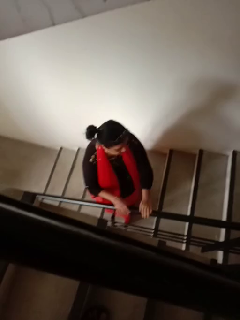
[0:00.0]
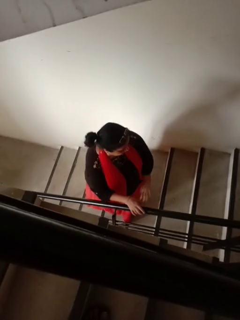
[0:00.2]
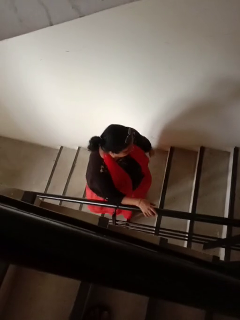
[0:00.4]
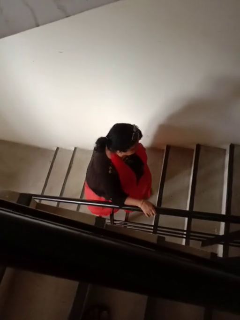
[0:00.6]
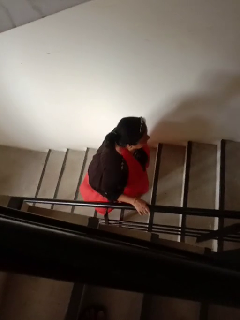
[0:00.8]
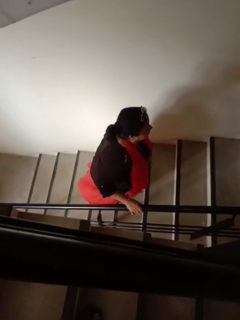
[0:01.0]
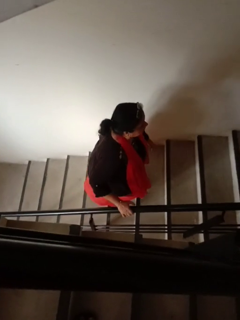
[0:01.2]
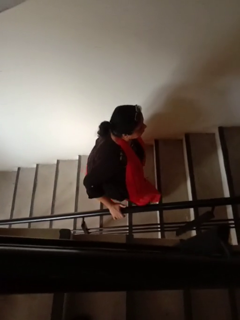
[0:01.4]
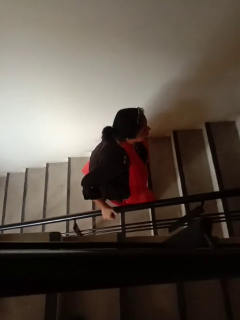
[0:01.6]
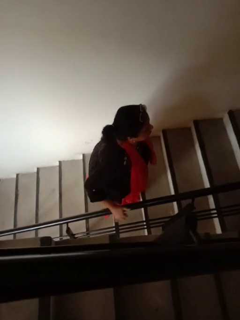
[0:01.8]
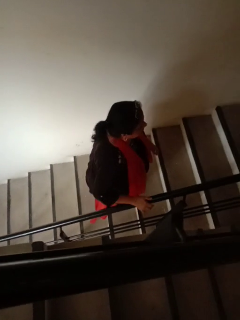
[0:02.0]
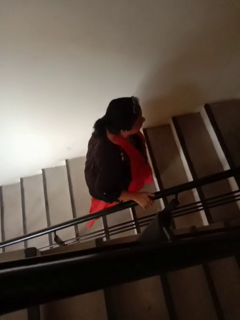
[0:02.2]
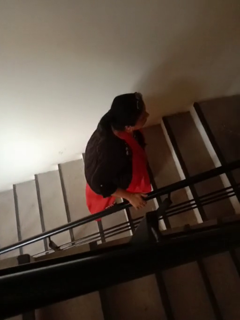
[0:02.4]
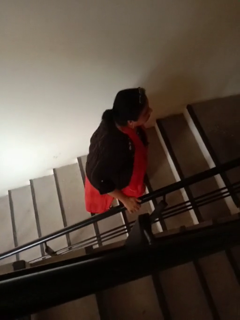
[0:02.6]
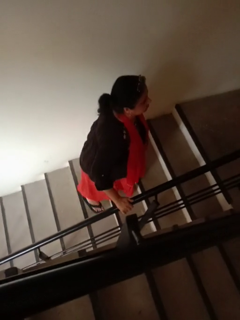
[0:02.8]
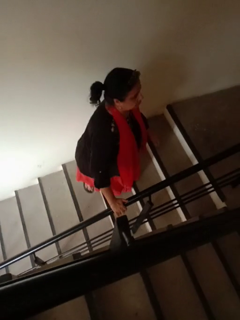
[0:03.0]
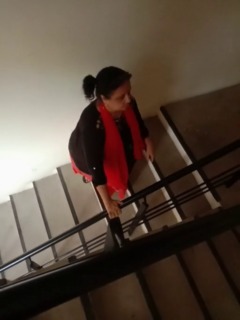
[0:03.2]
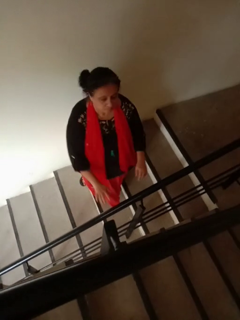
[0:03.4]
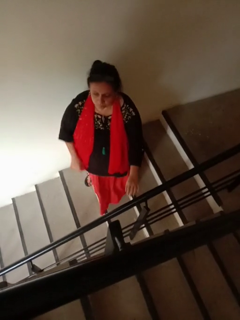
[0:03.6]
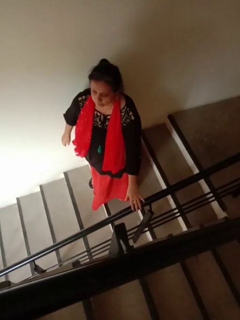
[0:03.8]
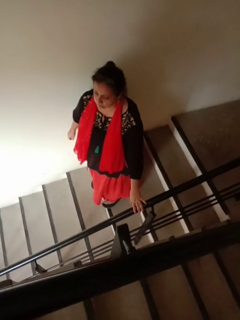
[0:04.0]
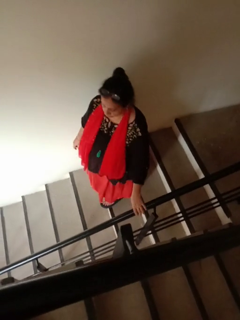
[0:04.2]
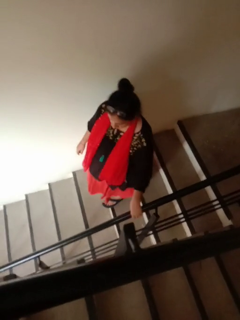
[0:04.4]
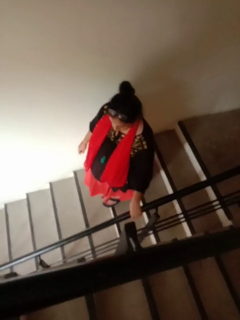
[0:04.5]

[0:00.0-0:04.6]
person climbs up stairs

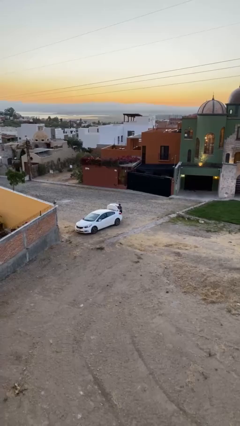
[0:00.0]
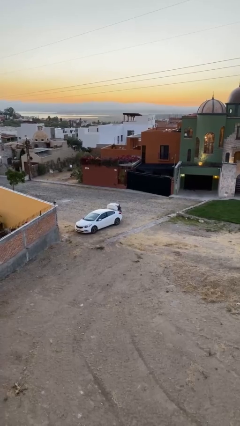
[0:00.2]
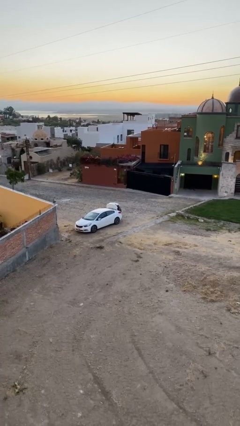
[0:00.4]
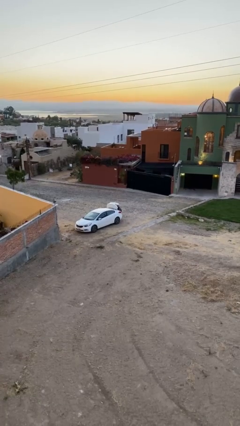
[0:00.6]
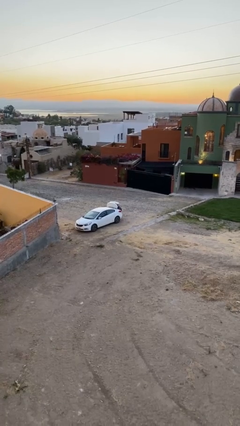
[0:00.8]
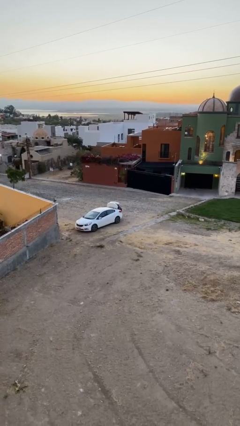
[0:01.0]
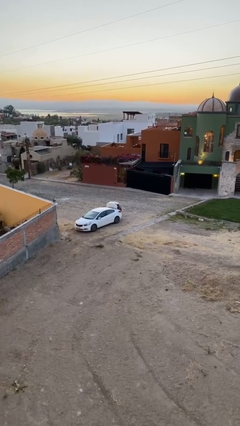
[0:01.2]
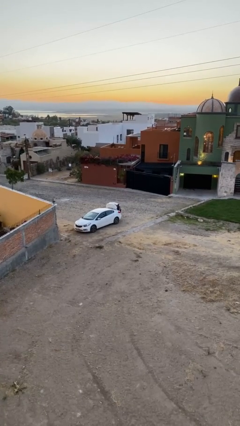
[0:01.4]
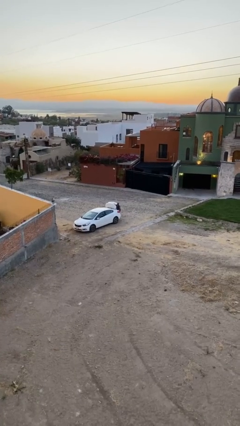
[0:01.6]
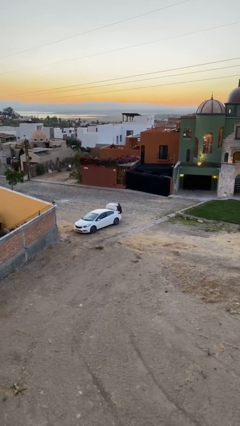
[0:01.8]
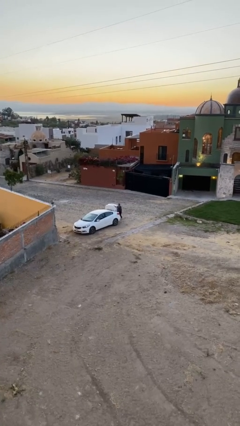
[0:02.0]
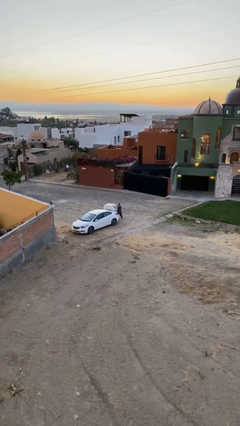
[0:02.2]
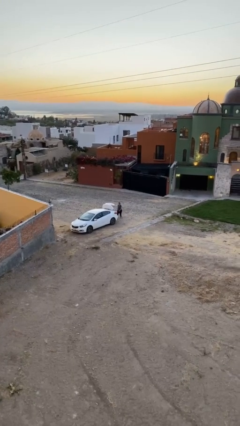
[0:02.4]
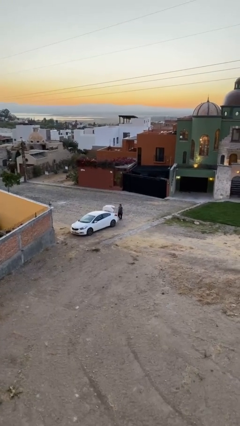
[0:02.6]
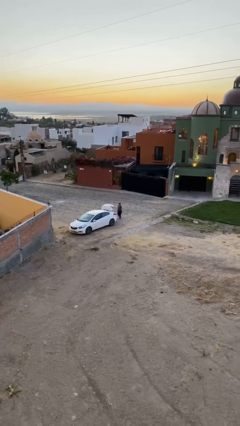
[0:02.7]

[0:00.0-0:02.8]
person loads car

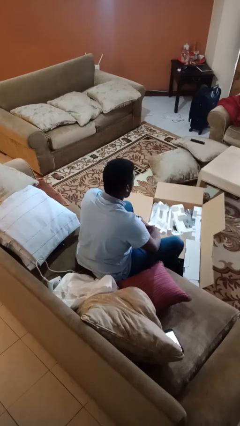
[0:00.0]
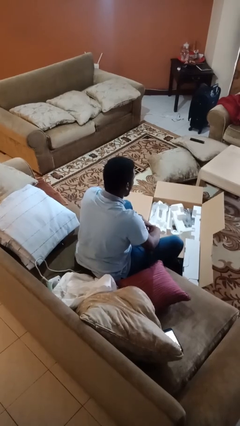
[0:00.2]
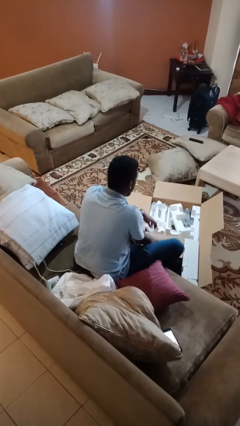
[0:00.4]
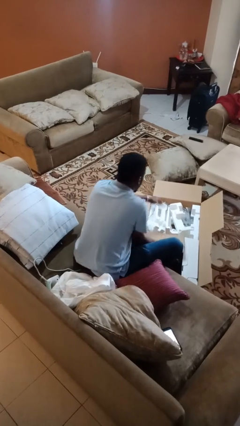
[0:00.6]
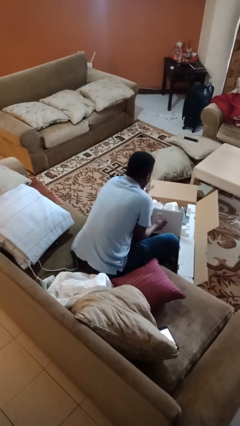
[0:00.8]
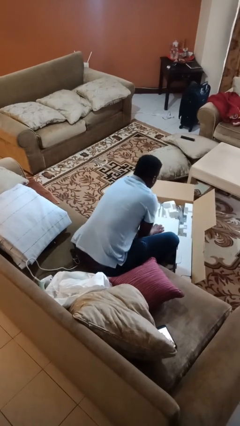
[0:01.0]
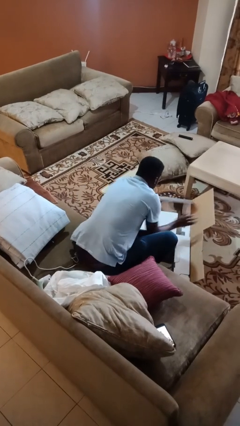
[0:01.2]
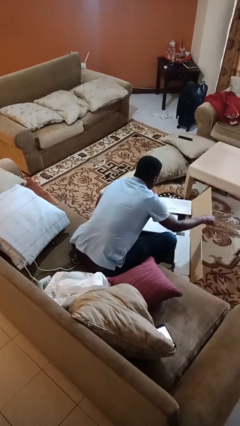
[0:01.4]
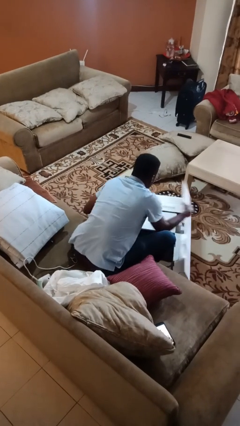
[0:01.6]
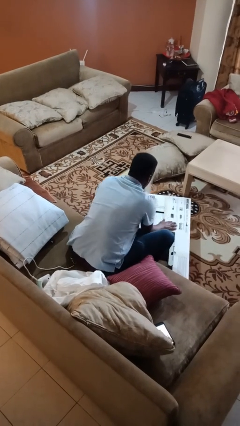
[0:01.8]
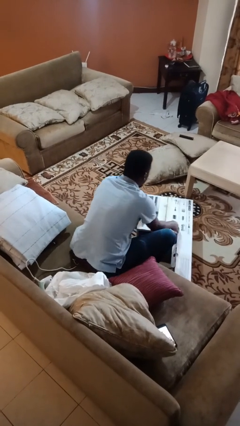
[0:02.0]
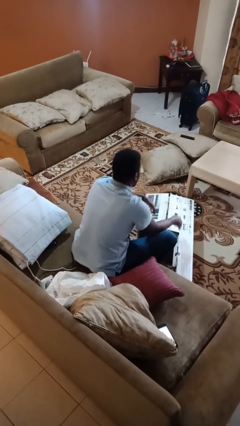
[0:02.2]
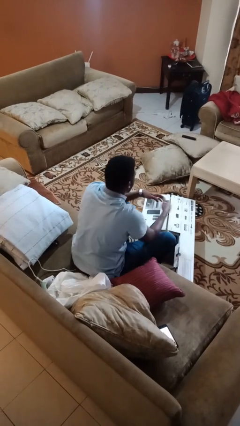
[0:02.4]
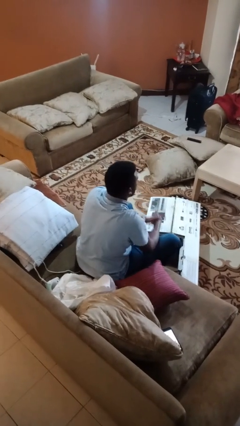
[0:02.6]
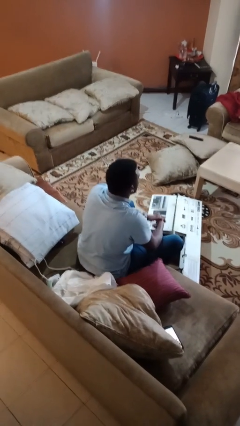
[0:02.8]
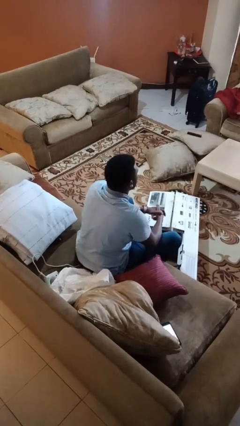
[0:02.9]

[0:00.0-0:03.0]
person closes box

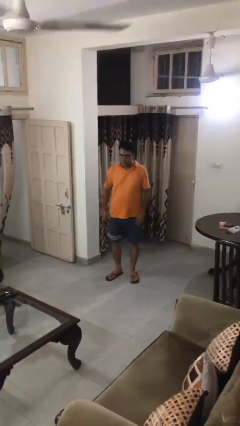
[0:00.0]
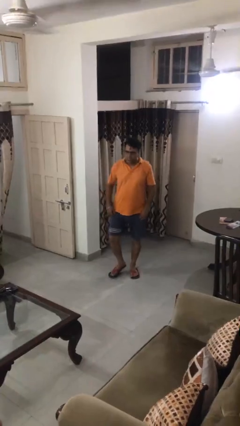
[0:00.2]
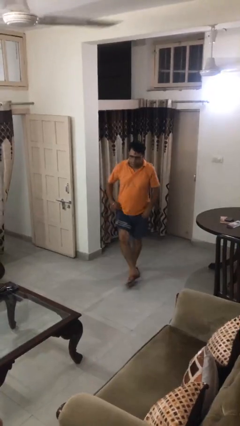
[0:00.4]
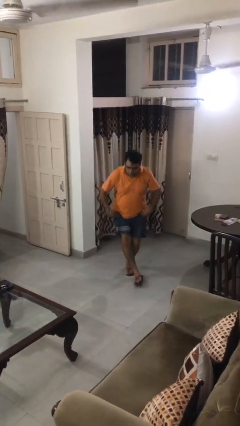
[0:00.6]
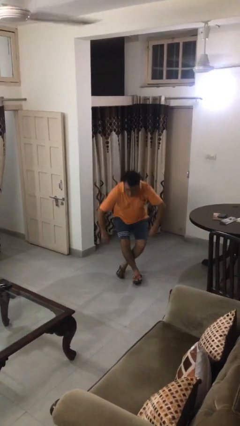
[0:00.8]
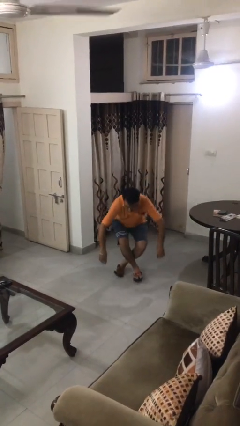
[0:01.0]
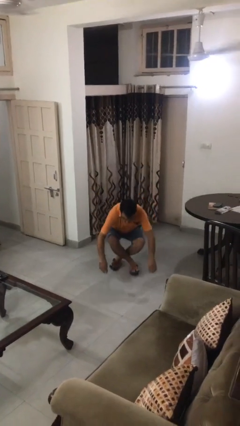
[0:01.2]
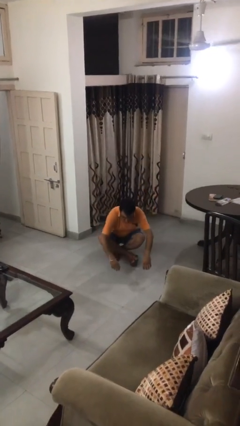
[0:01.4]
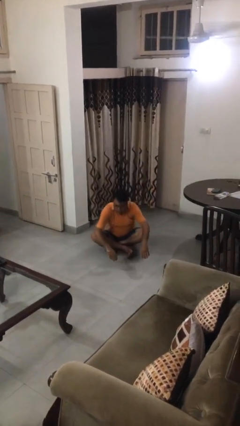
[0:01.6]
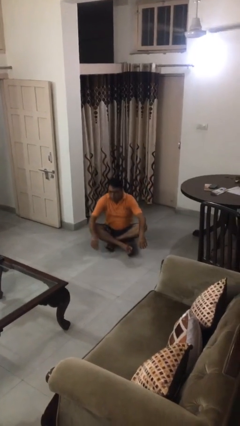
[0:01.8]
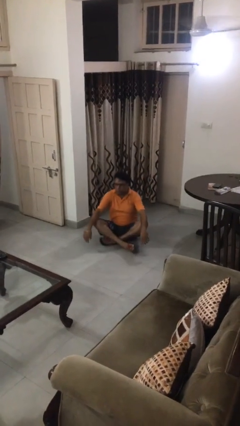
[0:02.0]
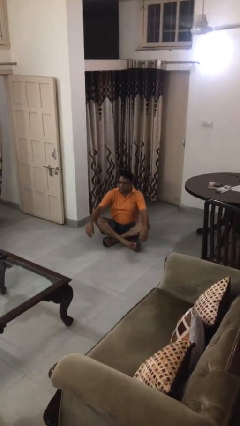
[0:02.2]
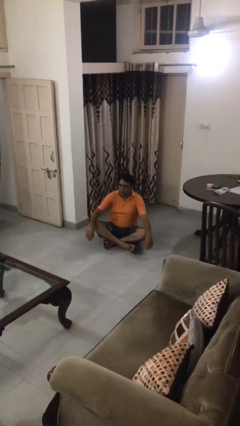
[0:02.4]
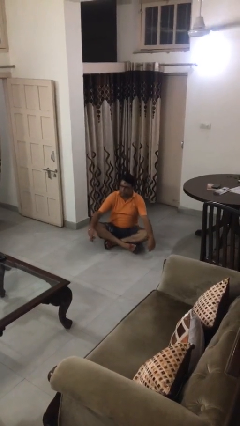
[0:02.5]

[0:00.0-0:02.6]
person sits crisscross

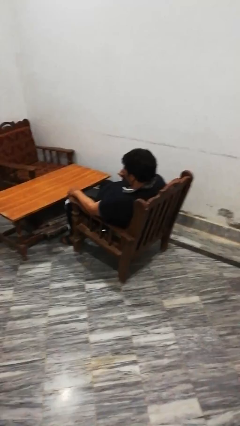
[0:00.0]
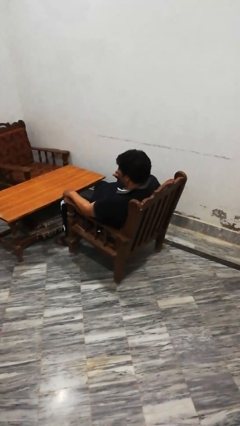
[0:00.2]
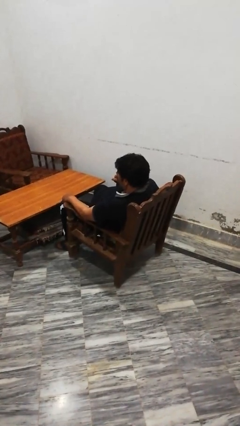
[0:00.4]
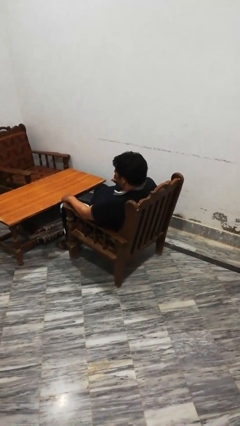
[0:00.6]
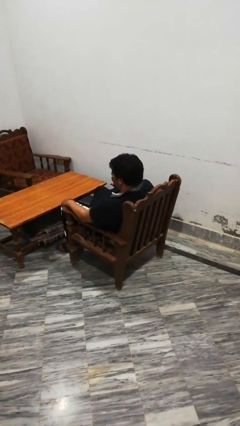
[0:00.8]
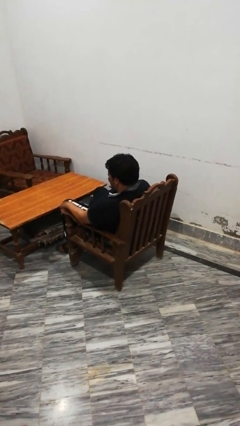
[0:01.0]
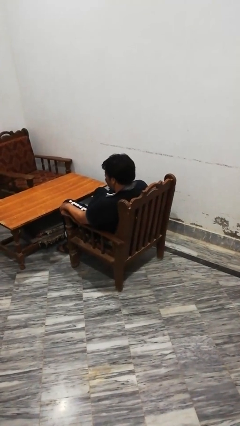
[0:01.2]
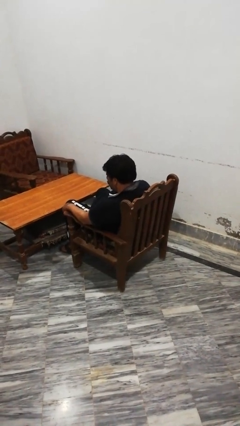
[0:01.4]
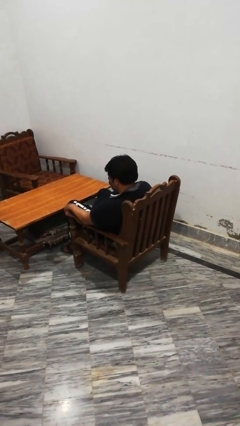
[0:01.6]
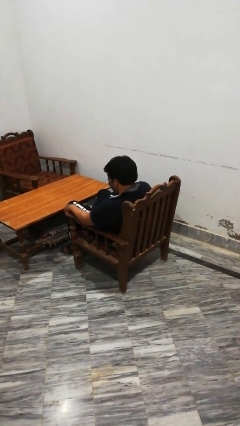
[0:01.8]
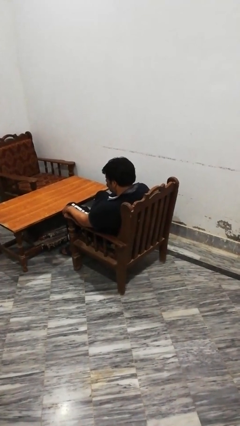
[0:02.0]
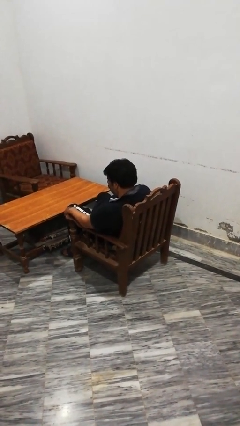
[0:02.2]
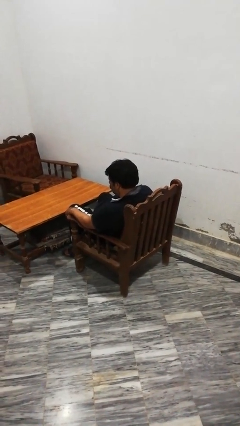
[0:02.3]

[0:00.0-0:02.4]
person pushes in chair

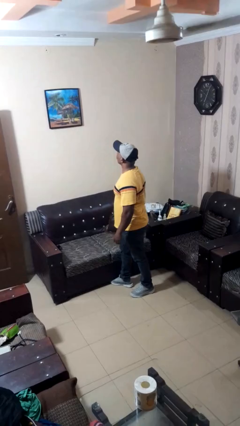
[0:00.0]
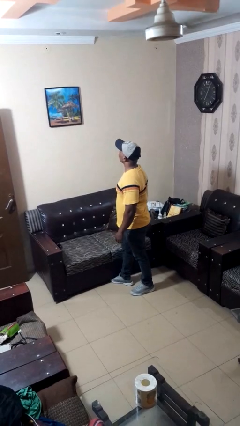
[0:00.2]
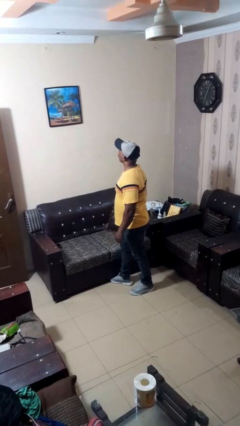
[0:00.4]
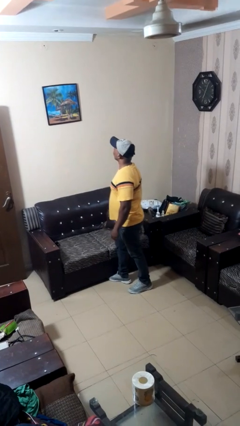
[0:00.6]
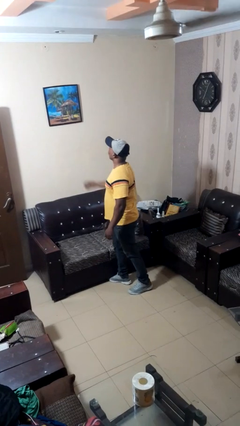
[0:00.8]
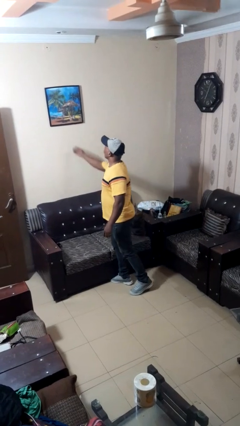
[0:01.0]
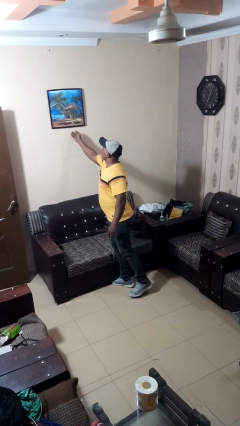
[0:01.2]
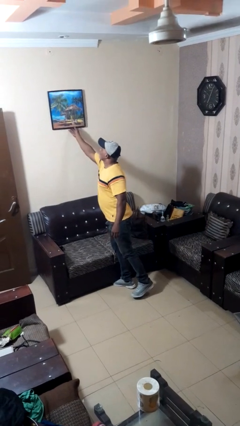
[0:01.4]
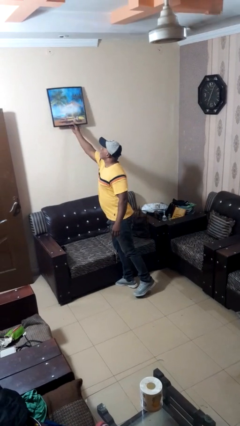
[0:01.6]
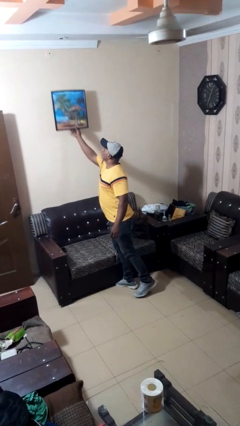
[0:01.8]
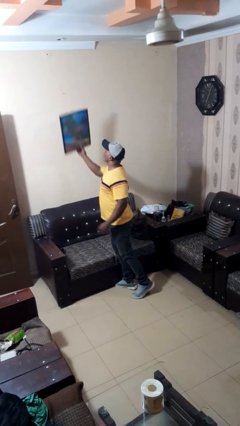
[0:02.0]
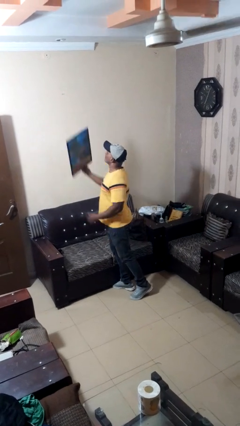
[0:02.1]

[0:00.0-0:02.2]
person takes down picture frame

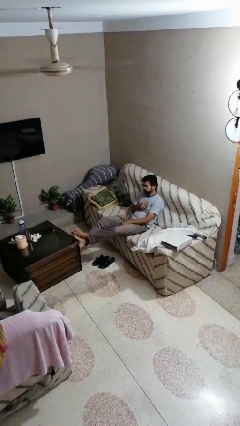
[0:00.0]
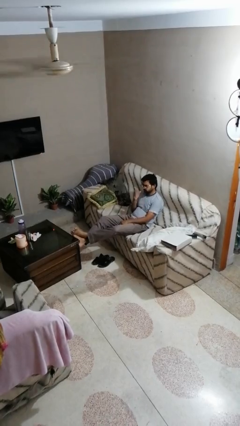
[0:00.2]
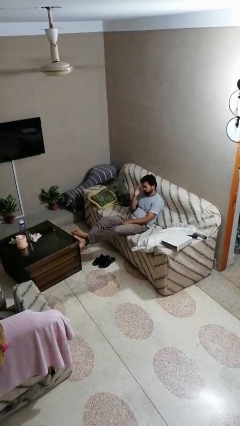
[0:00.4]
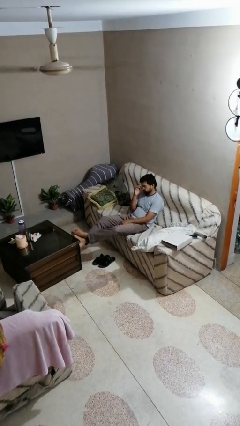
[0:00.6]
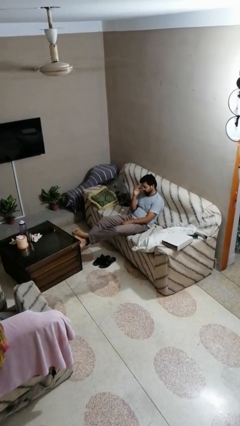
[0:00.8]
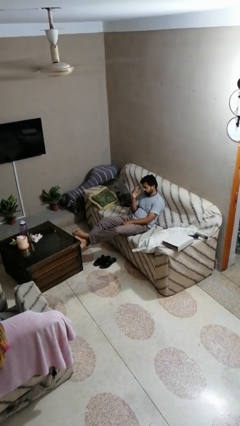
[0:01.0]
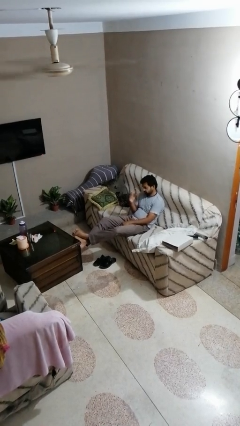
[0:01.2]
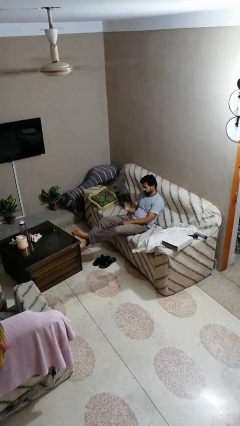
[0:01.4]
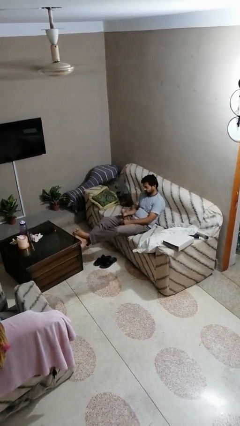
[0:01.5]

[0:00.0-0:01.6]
person takes off glasses
